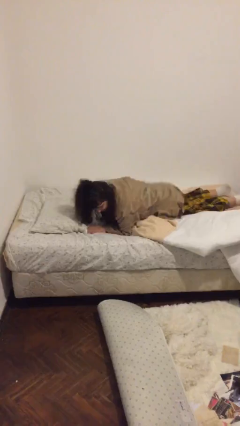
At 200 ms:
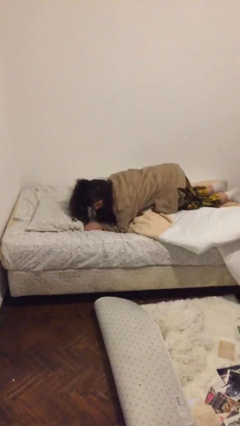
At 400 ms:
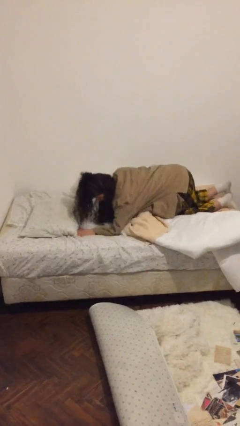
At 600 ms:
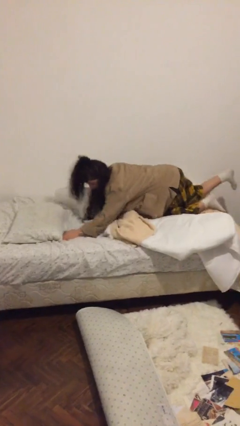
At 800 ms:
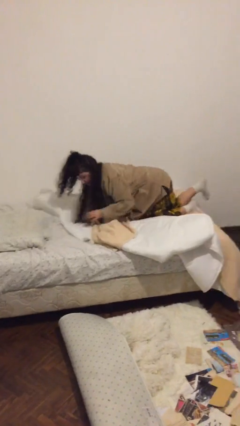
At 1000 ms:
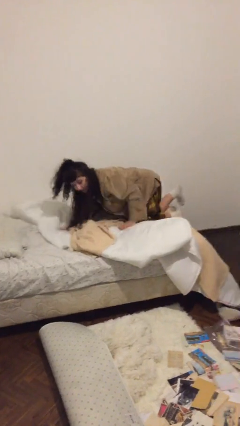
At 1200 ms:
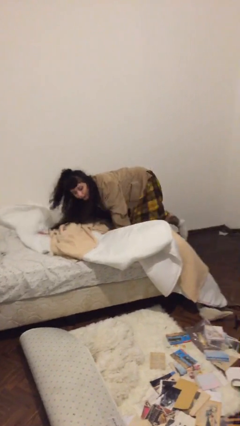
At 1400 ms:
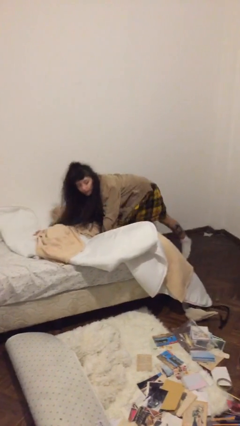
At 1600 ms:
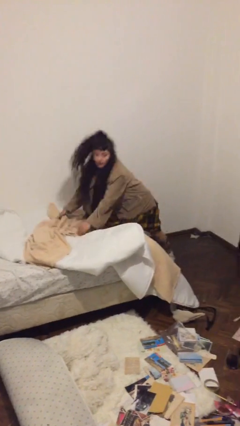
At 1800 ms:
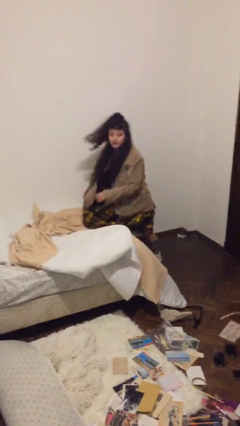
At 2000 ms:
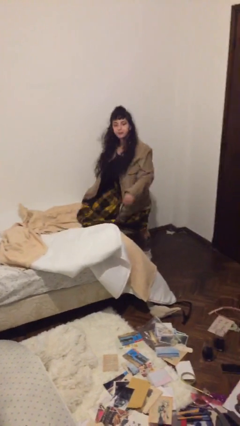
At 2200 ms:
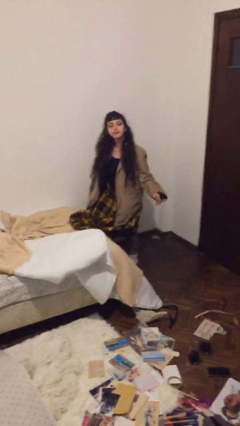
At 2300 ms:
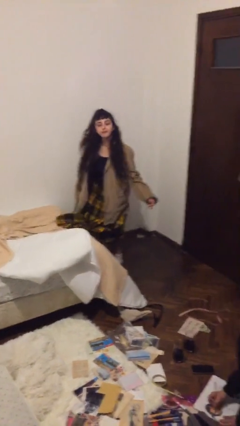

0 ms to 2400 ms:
person stands up

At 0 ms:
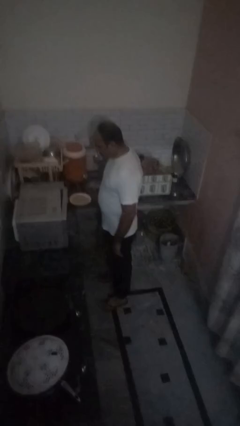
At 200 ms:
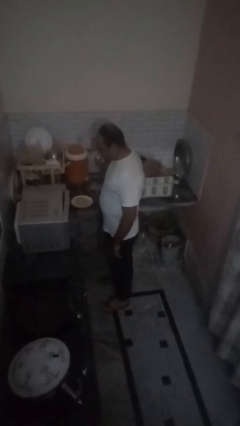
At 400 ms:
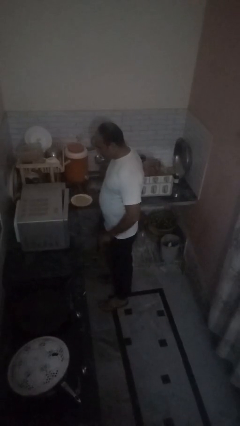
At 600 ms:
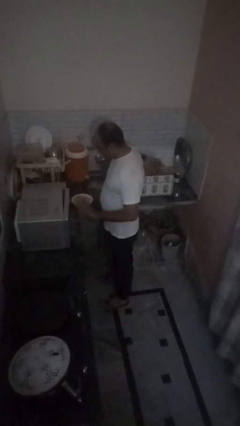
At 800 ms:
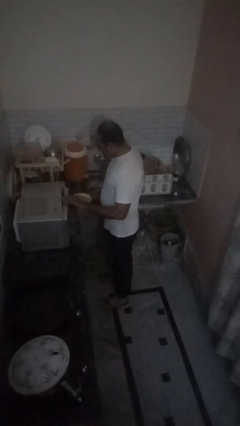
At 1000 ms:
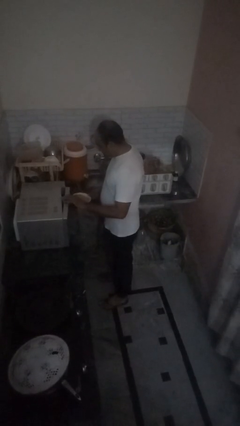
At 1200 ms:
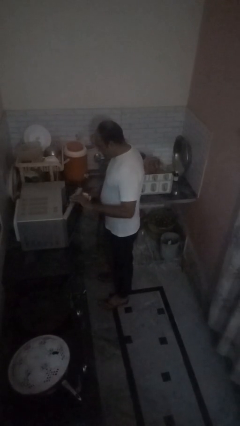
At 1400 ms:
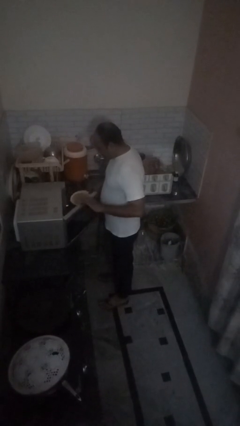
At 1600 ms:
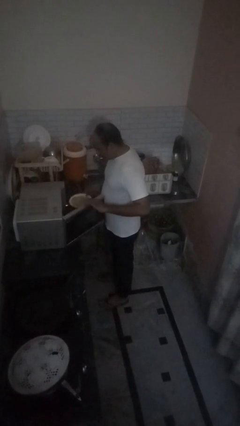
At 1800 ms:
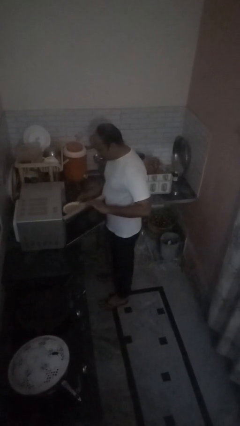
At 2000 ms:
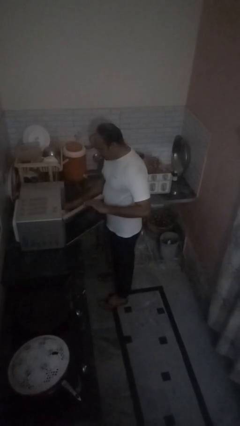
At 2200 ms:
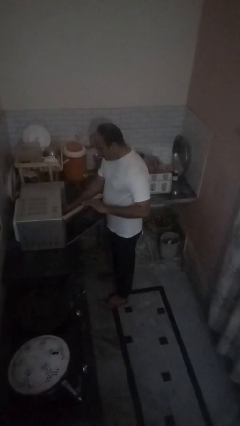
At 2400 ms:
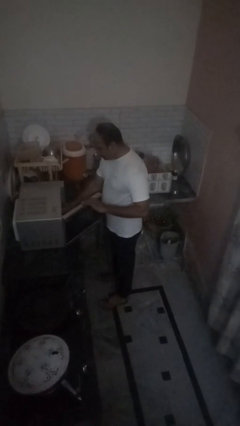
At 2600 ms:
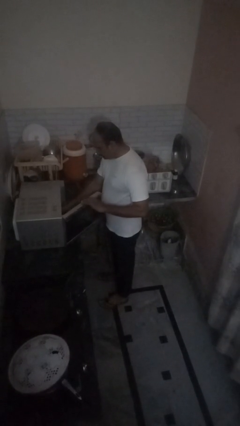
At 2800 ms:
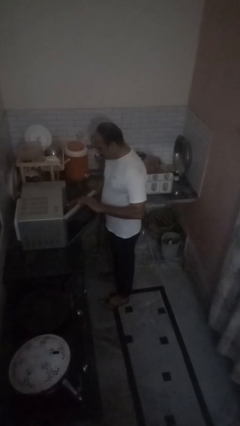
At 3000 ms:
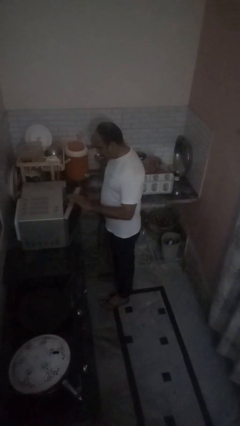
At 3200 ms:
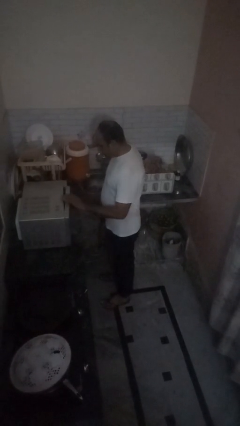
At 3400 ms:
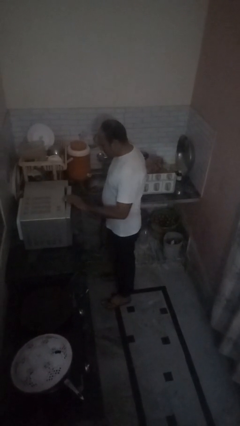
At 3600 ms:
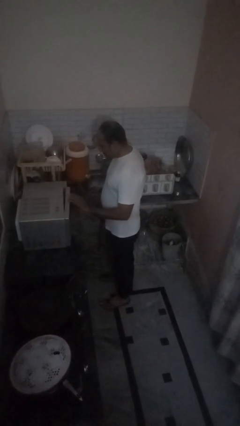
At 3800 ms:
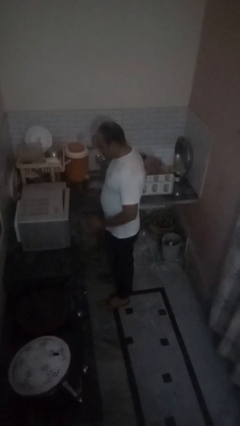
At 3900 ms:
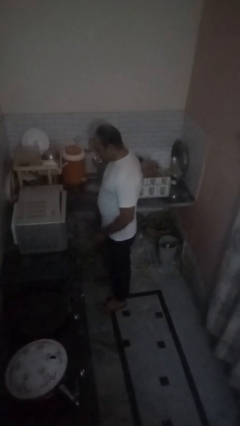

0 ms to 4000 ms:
person puts object into oven

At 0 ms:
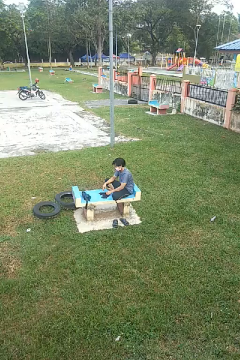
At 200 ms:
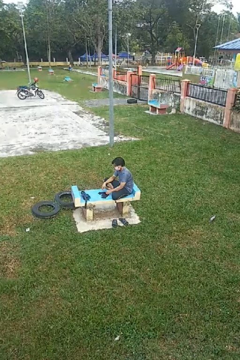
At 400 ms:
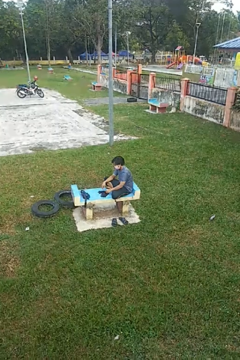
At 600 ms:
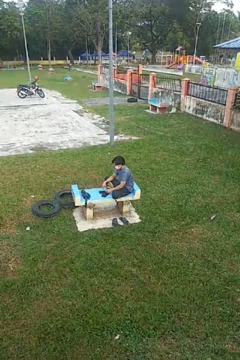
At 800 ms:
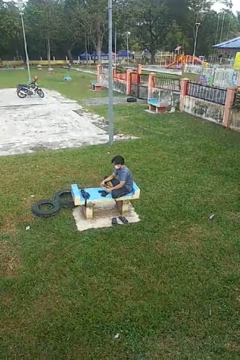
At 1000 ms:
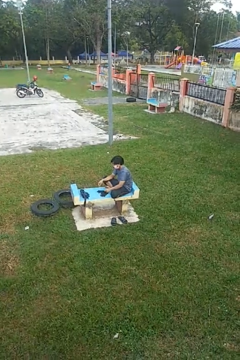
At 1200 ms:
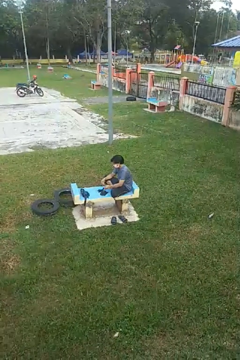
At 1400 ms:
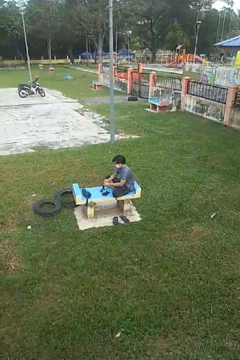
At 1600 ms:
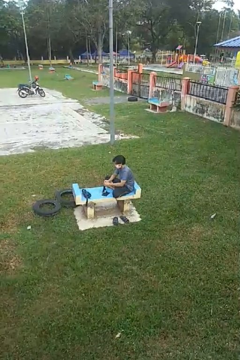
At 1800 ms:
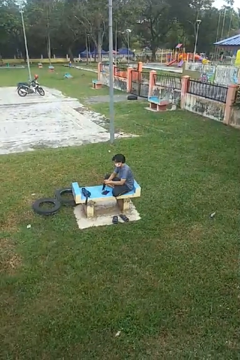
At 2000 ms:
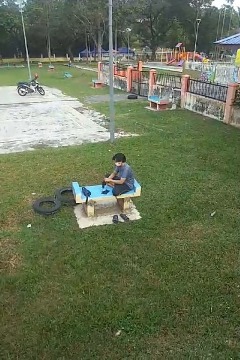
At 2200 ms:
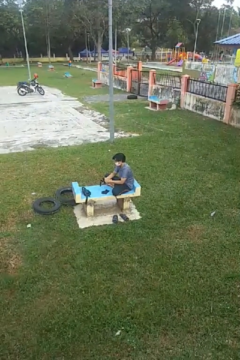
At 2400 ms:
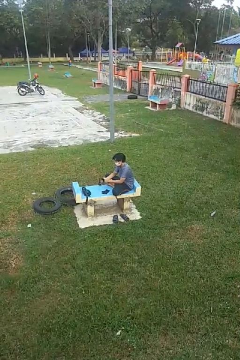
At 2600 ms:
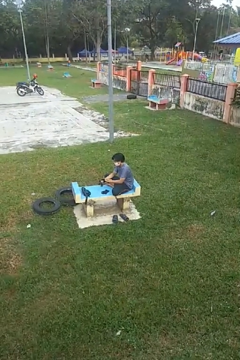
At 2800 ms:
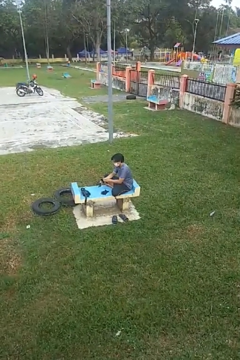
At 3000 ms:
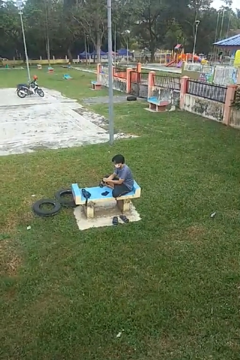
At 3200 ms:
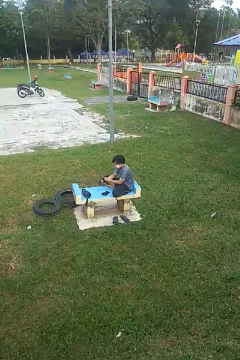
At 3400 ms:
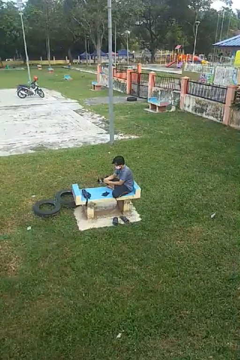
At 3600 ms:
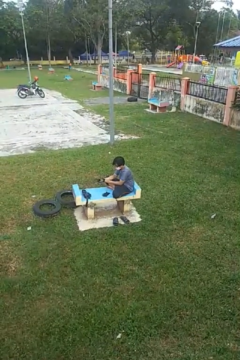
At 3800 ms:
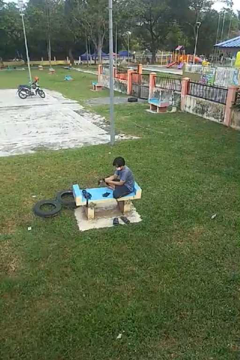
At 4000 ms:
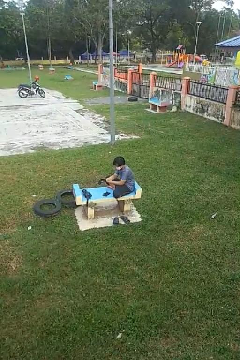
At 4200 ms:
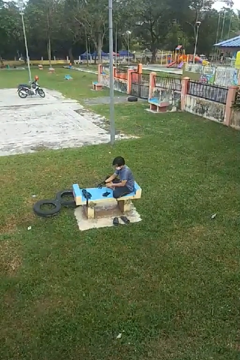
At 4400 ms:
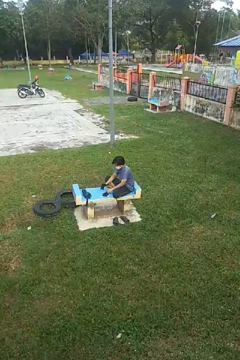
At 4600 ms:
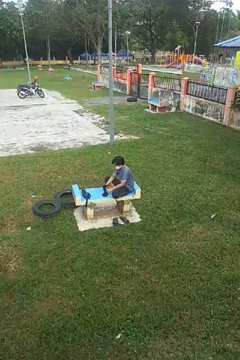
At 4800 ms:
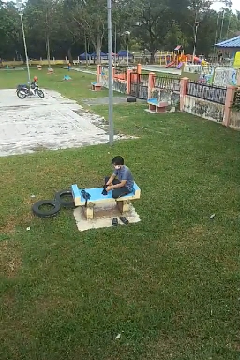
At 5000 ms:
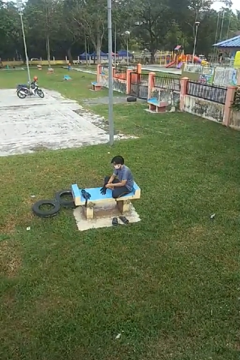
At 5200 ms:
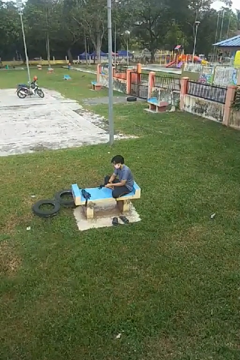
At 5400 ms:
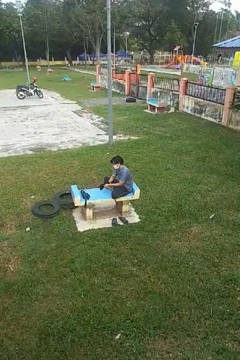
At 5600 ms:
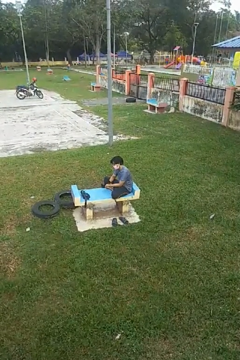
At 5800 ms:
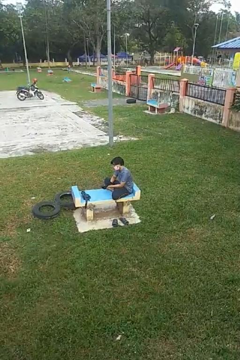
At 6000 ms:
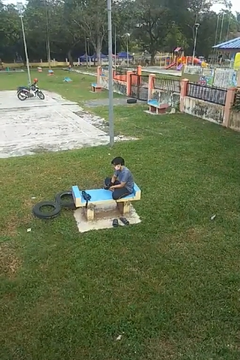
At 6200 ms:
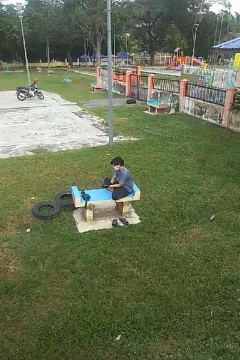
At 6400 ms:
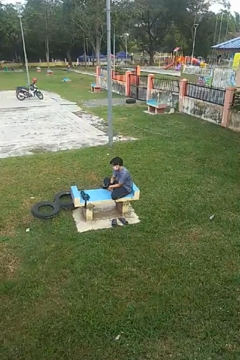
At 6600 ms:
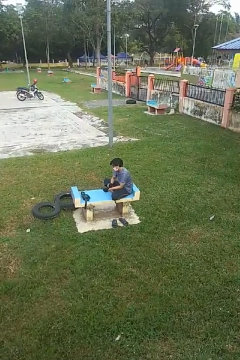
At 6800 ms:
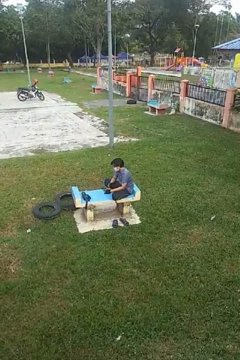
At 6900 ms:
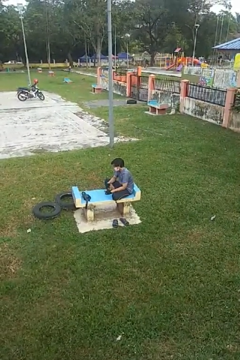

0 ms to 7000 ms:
person puts on gloves

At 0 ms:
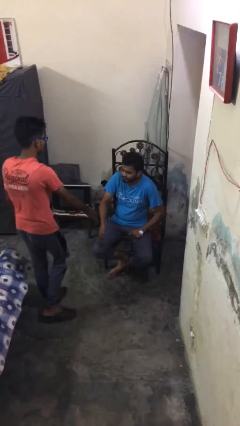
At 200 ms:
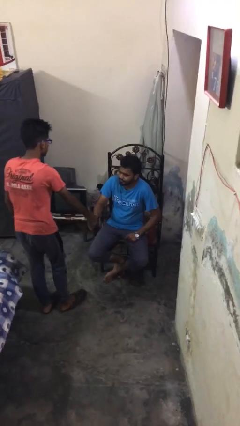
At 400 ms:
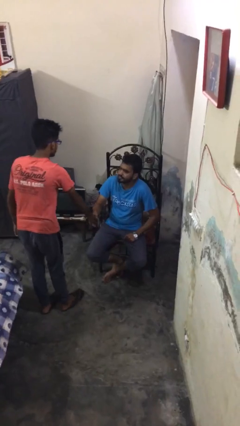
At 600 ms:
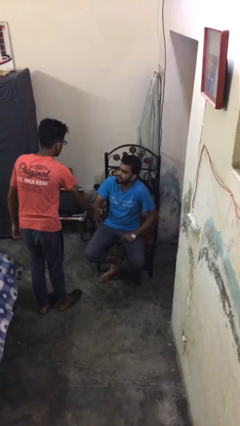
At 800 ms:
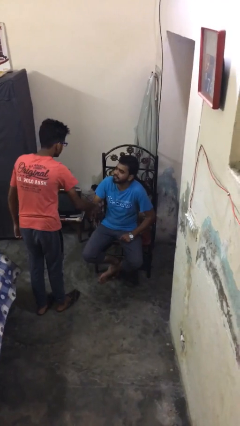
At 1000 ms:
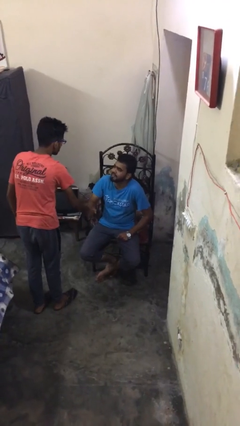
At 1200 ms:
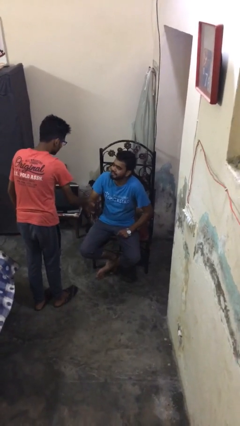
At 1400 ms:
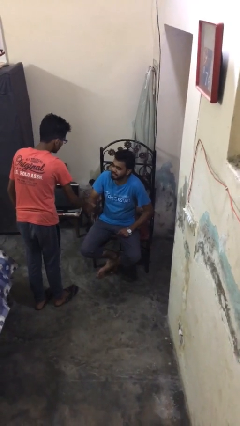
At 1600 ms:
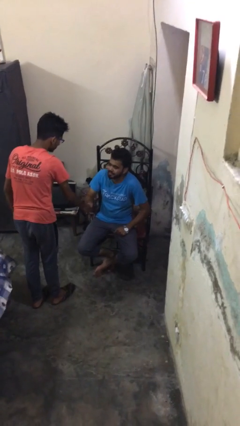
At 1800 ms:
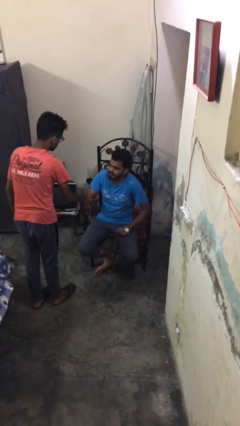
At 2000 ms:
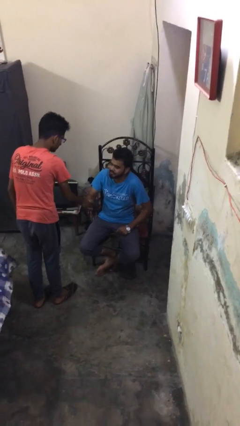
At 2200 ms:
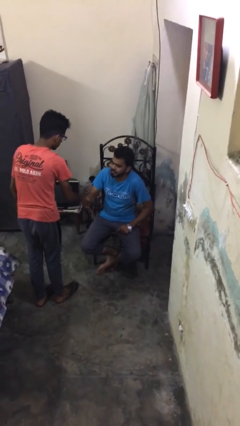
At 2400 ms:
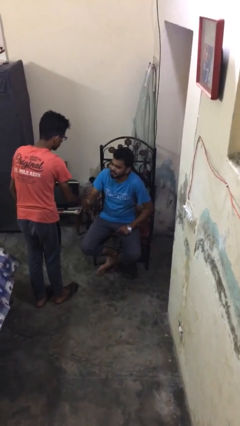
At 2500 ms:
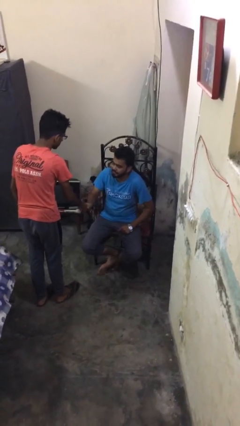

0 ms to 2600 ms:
person shakes hand

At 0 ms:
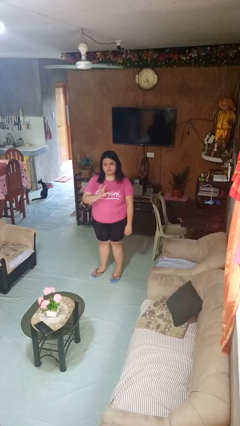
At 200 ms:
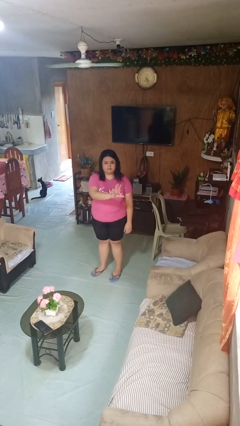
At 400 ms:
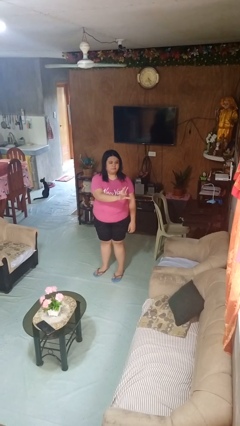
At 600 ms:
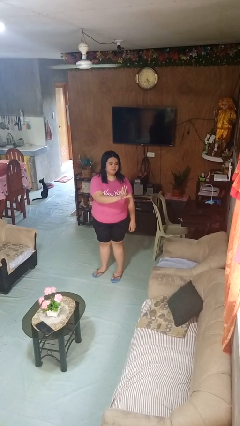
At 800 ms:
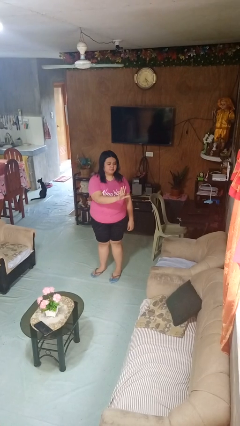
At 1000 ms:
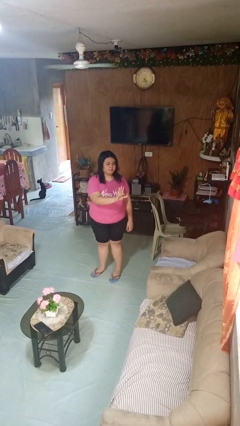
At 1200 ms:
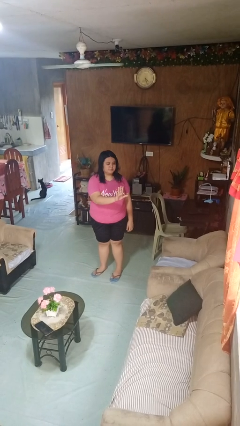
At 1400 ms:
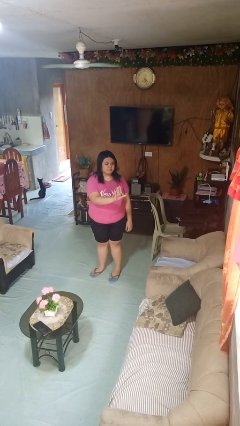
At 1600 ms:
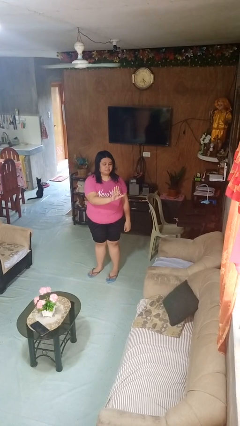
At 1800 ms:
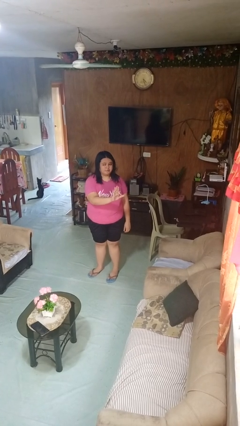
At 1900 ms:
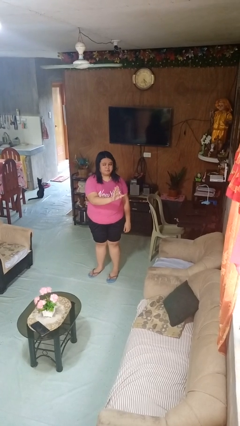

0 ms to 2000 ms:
person gestures stop

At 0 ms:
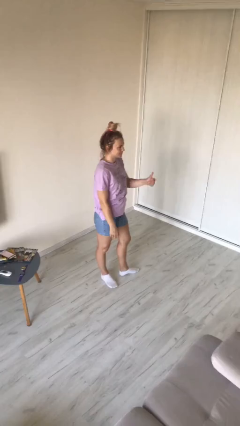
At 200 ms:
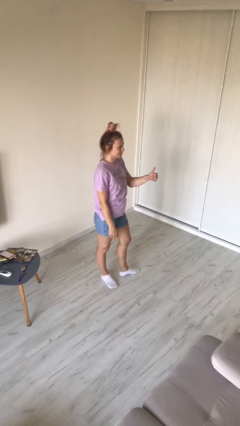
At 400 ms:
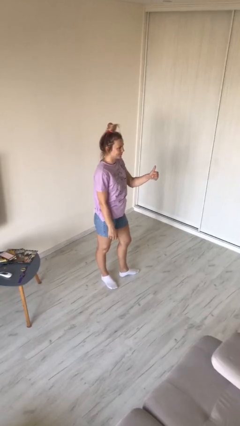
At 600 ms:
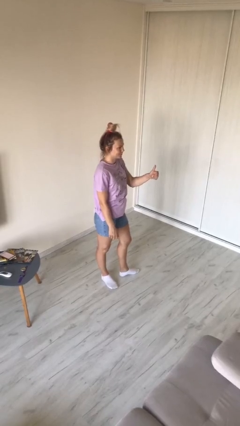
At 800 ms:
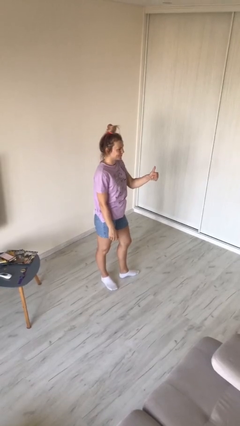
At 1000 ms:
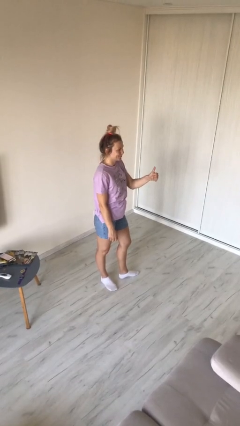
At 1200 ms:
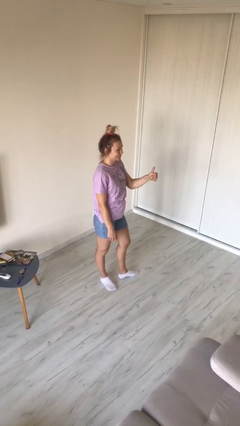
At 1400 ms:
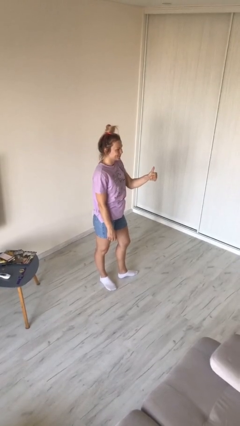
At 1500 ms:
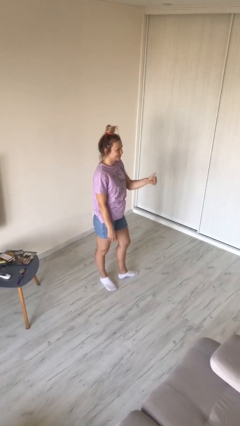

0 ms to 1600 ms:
person gestures thumbs up
